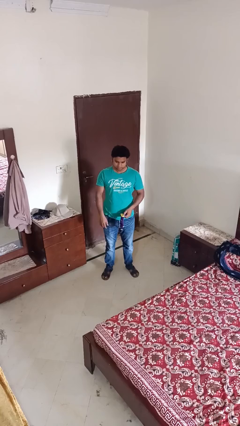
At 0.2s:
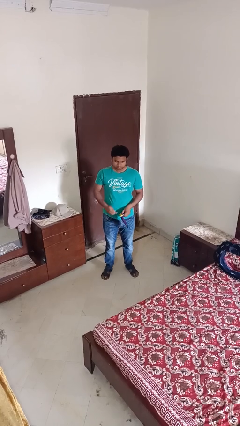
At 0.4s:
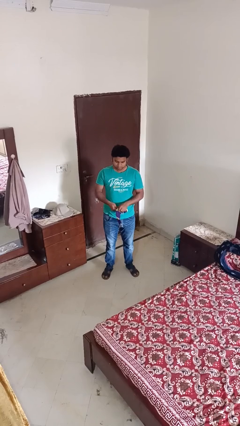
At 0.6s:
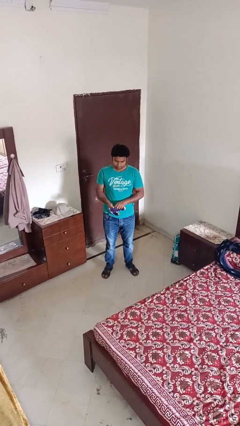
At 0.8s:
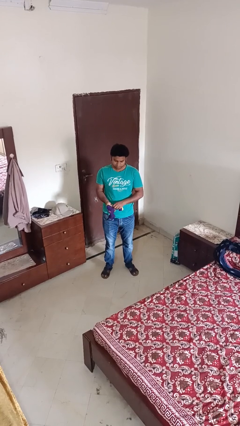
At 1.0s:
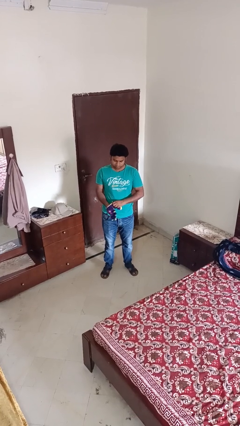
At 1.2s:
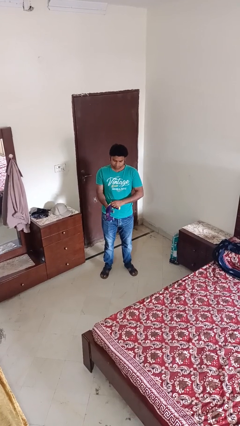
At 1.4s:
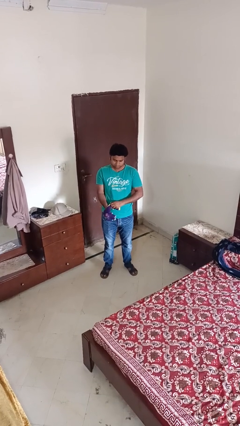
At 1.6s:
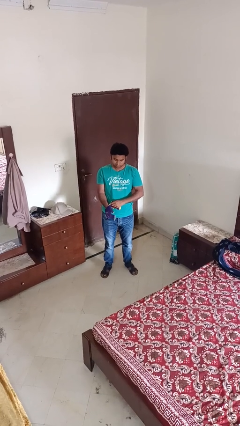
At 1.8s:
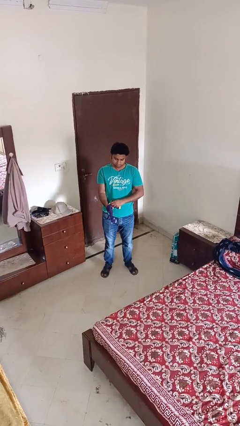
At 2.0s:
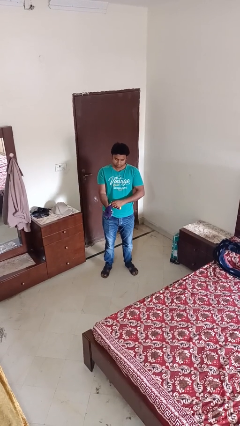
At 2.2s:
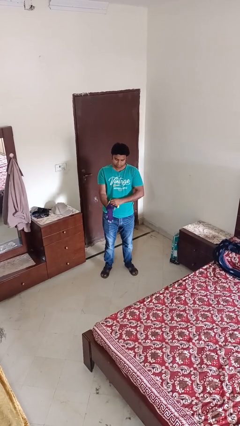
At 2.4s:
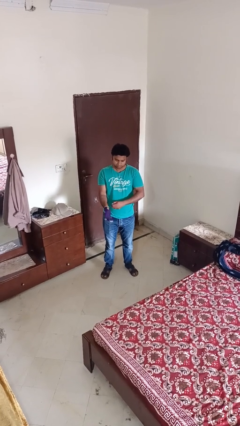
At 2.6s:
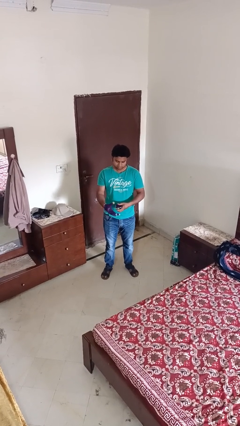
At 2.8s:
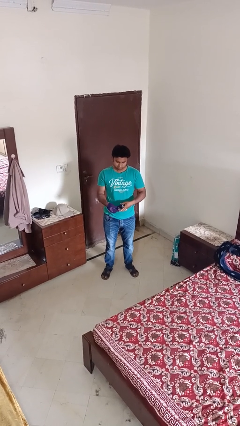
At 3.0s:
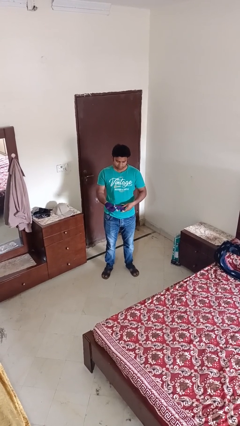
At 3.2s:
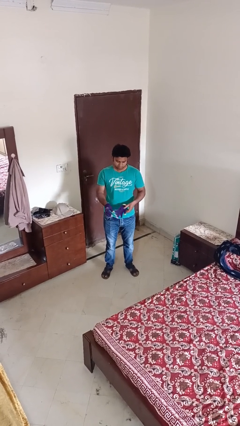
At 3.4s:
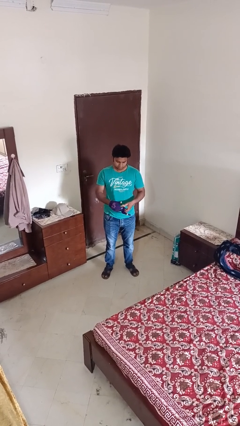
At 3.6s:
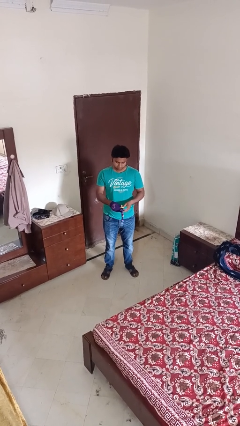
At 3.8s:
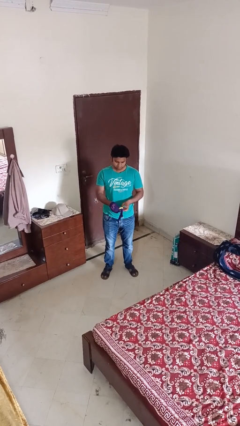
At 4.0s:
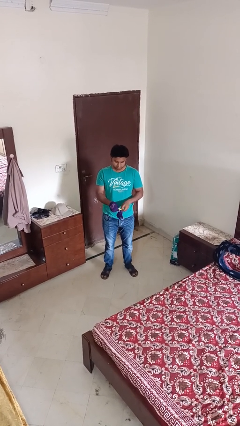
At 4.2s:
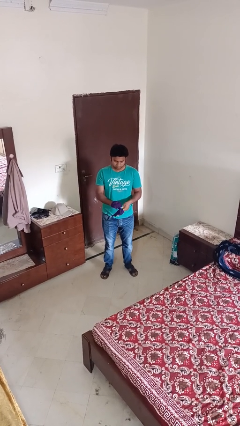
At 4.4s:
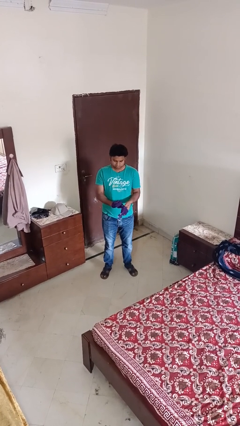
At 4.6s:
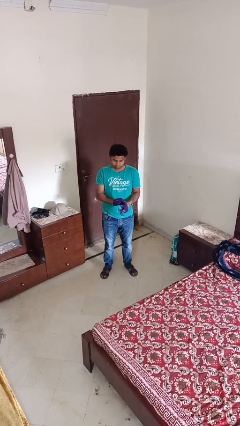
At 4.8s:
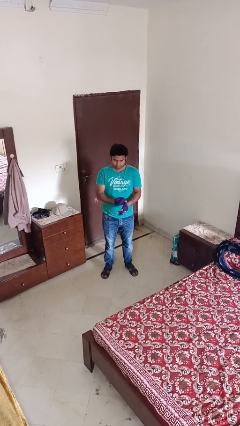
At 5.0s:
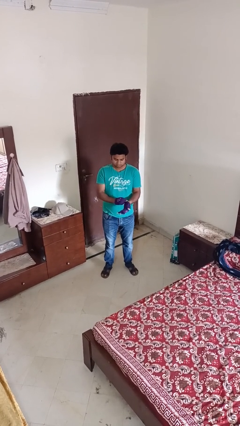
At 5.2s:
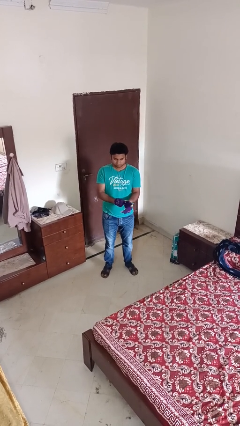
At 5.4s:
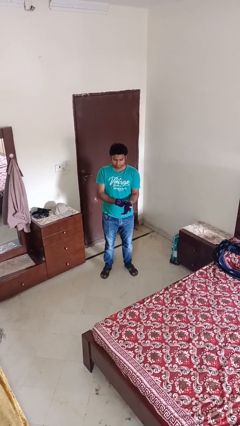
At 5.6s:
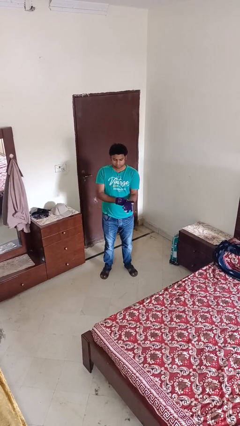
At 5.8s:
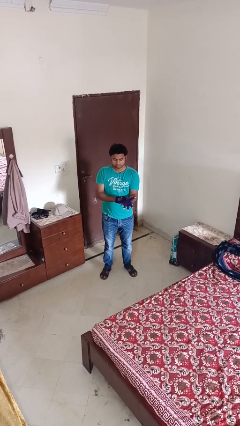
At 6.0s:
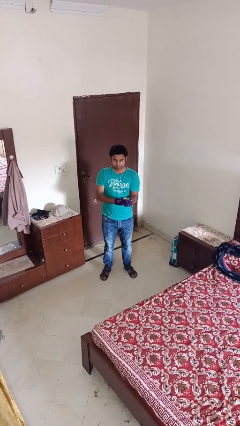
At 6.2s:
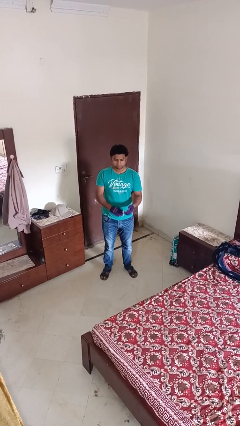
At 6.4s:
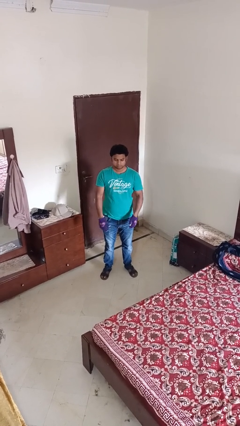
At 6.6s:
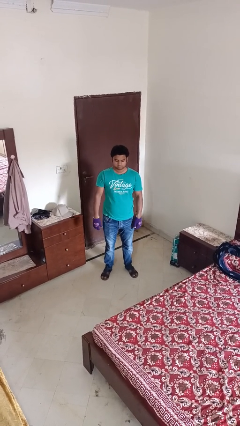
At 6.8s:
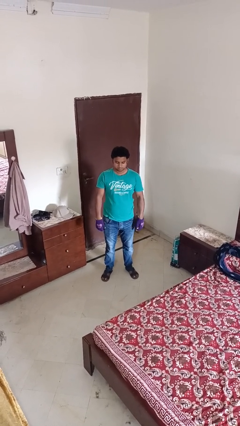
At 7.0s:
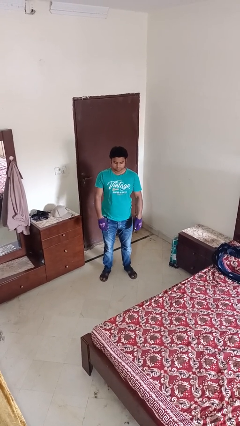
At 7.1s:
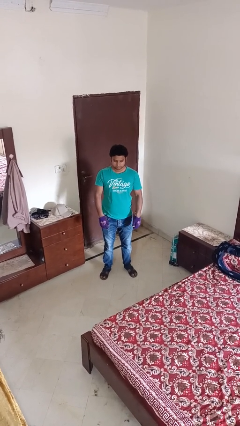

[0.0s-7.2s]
person puts on gloves

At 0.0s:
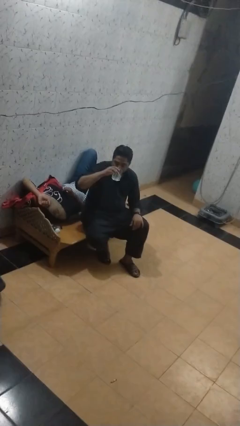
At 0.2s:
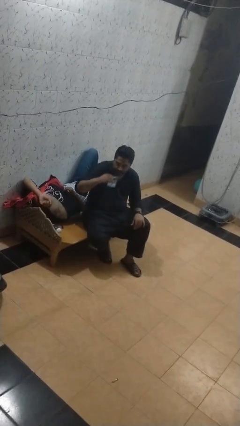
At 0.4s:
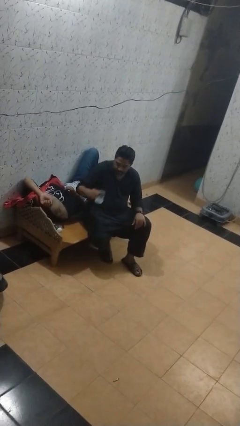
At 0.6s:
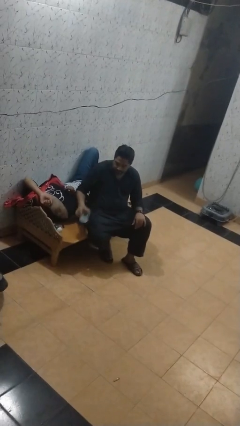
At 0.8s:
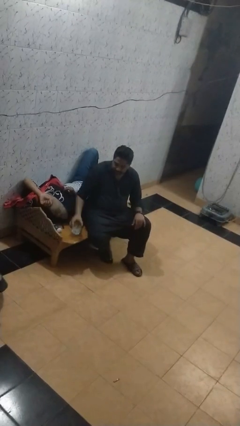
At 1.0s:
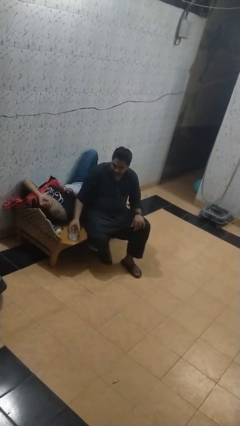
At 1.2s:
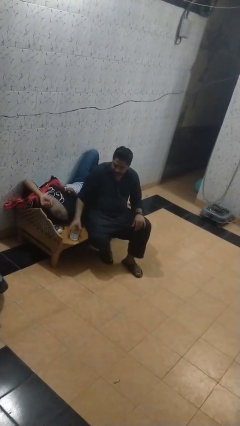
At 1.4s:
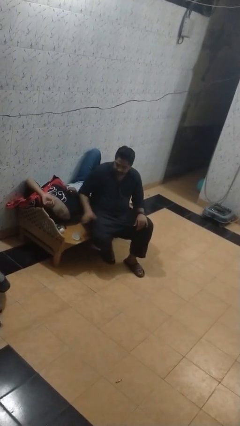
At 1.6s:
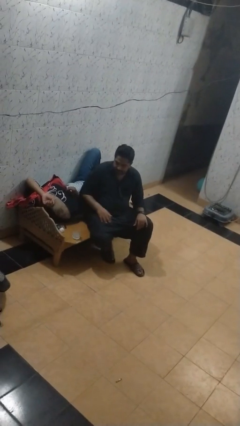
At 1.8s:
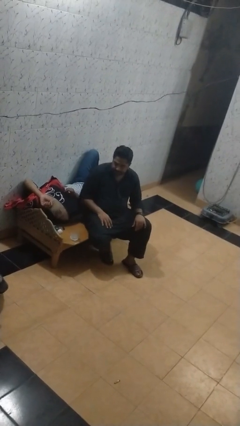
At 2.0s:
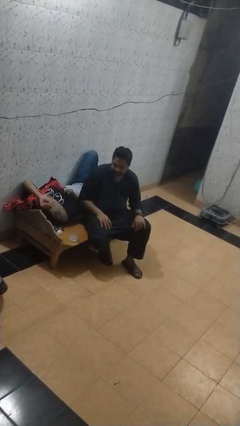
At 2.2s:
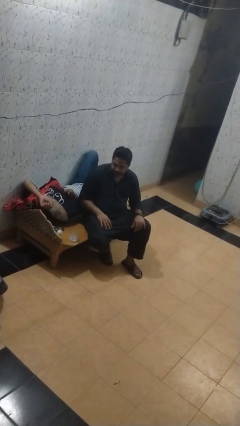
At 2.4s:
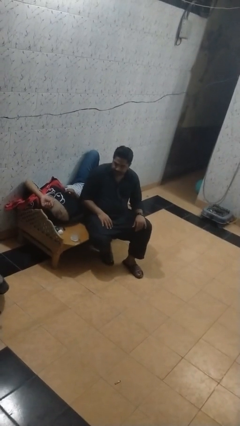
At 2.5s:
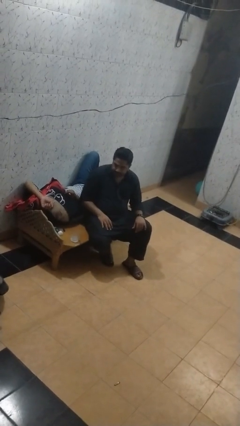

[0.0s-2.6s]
person puts down object on table

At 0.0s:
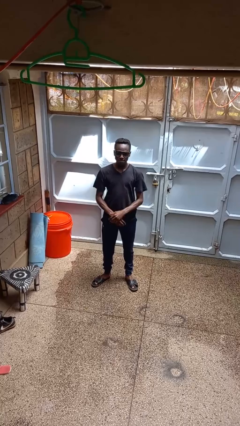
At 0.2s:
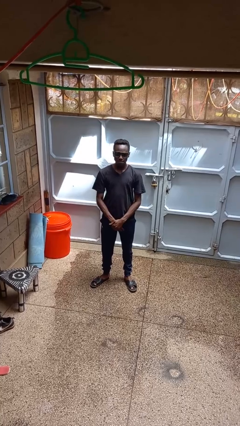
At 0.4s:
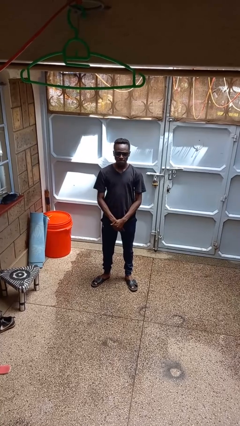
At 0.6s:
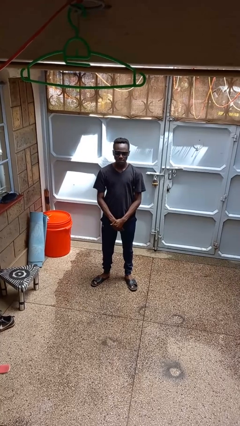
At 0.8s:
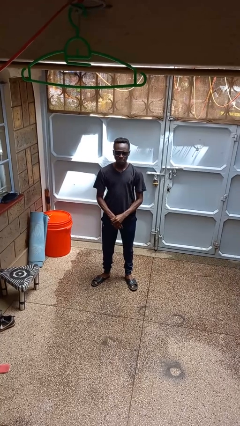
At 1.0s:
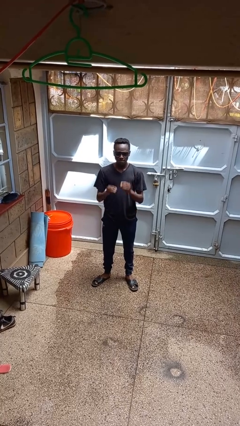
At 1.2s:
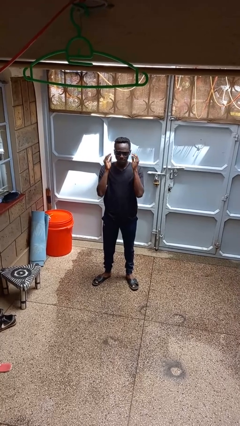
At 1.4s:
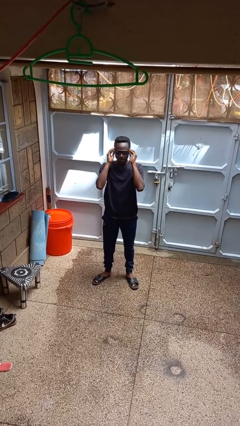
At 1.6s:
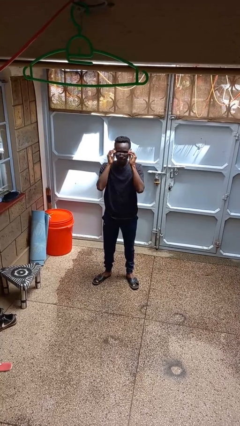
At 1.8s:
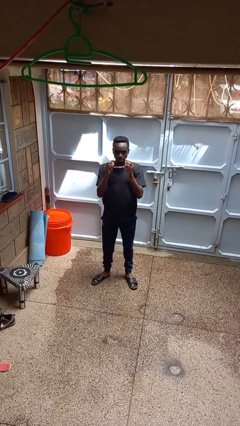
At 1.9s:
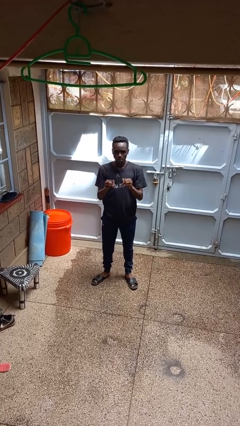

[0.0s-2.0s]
person takes off sunglasses

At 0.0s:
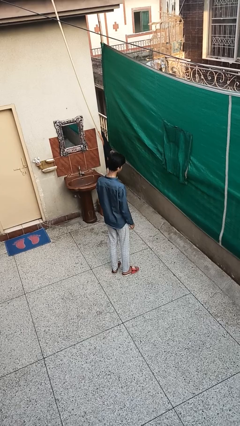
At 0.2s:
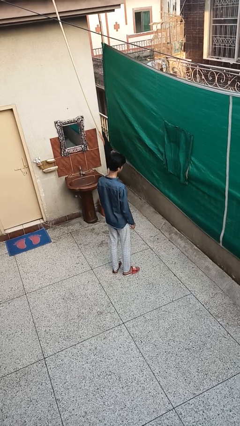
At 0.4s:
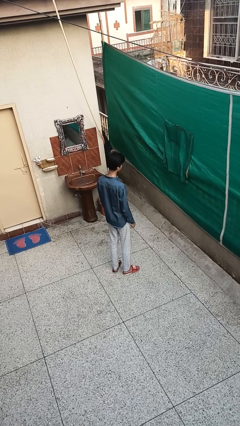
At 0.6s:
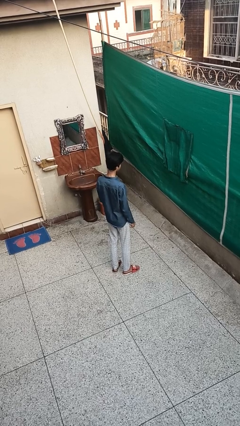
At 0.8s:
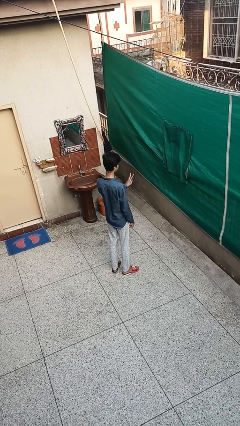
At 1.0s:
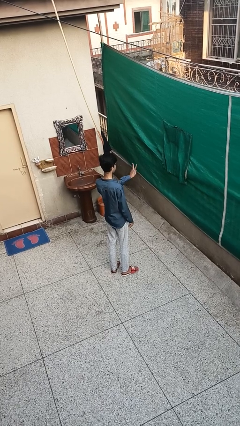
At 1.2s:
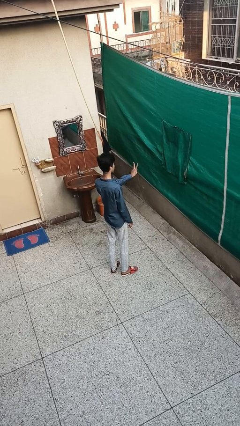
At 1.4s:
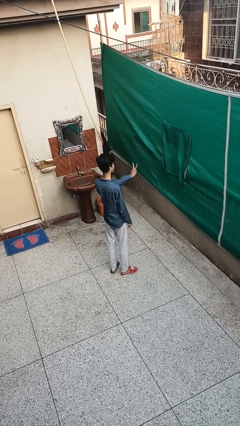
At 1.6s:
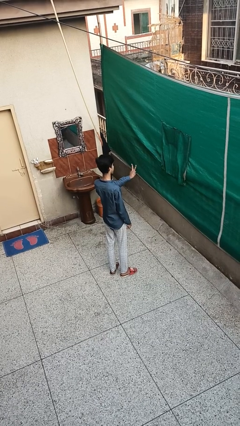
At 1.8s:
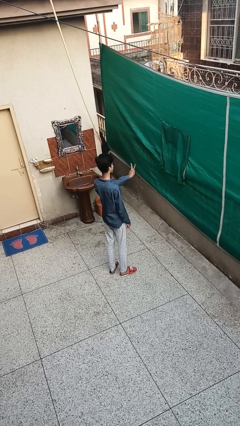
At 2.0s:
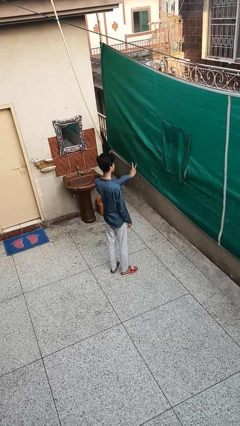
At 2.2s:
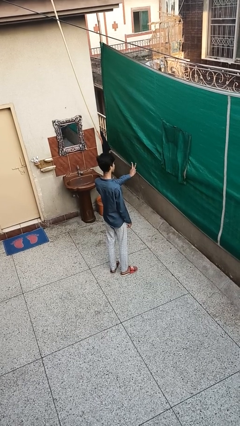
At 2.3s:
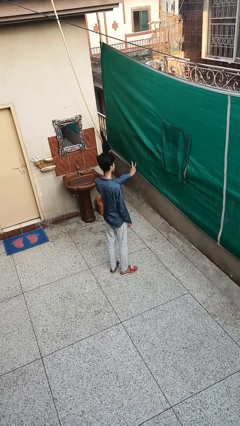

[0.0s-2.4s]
person gestures peace

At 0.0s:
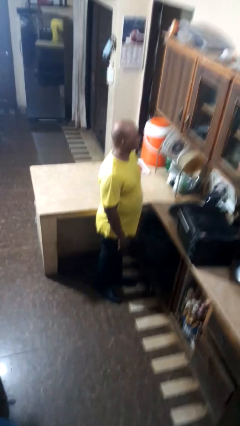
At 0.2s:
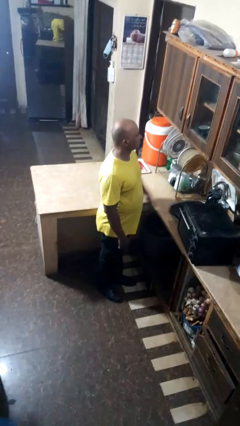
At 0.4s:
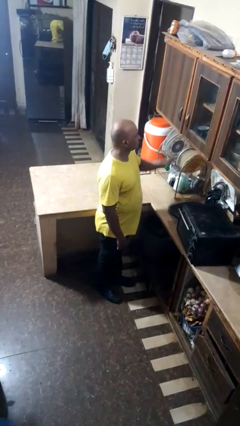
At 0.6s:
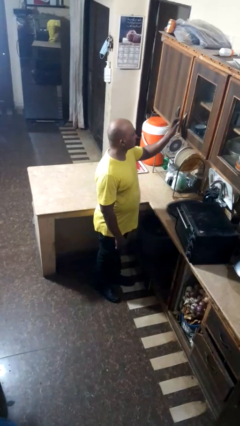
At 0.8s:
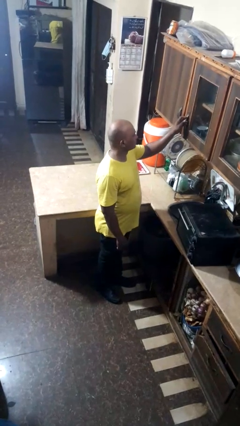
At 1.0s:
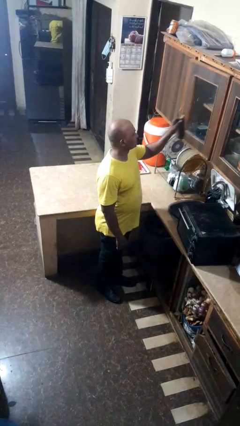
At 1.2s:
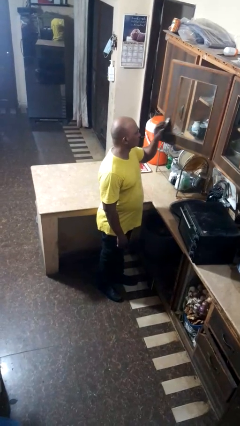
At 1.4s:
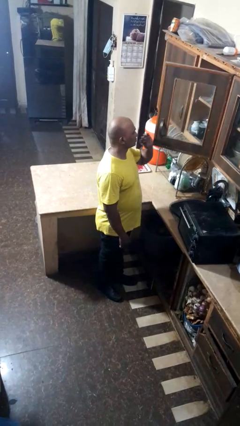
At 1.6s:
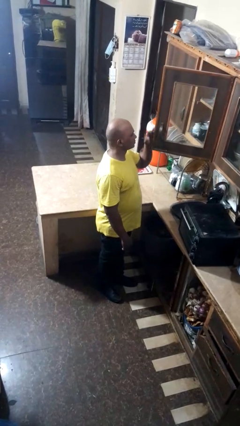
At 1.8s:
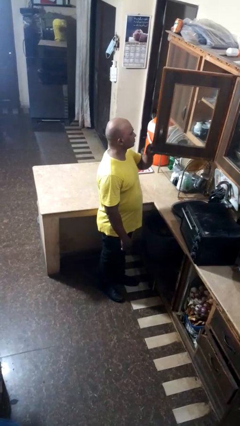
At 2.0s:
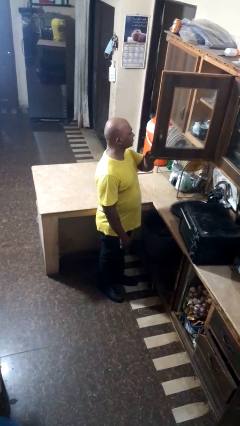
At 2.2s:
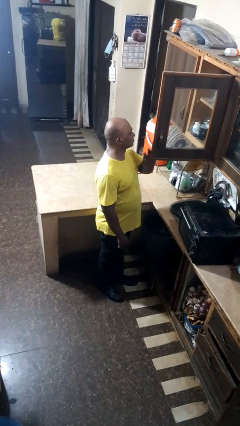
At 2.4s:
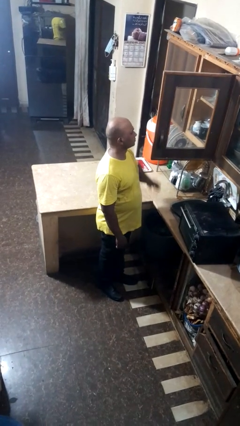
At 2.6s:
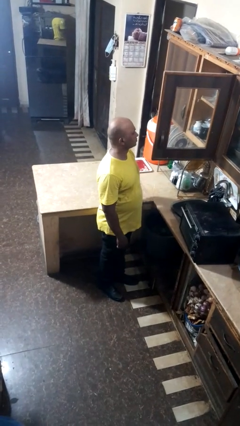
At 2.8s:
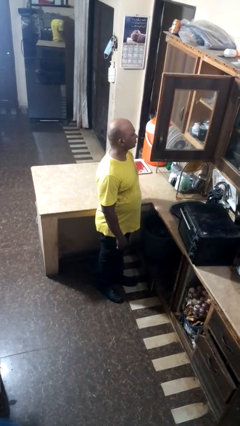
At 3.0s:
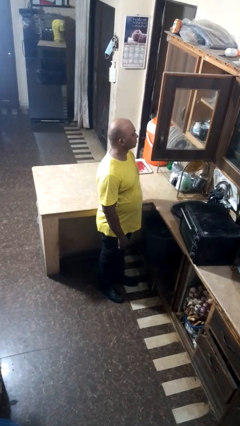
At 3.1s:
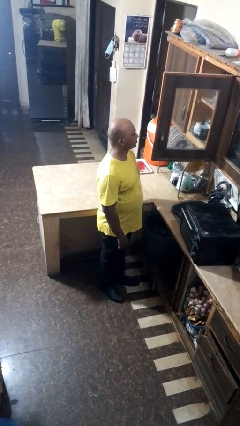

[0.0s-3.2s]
person opens cabinet

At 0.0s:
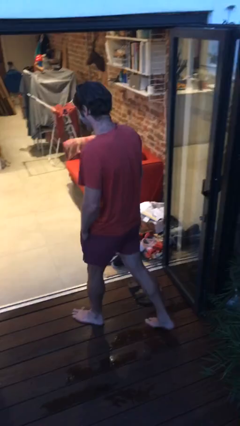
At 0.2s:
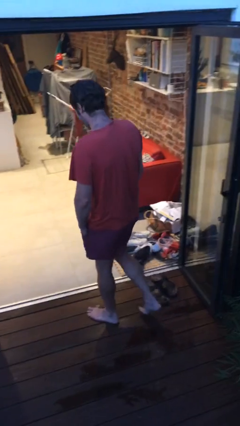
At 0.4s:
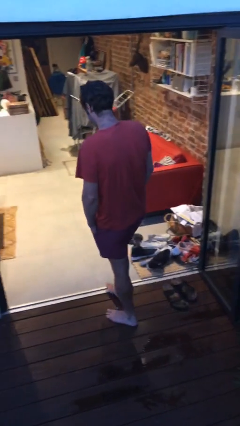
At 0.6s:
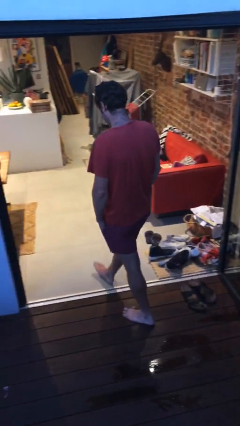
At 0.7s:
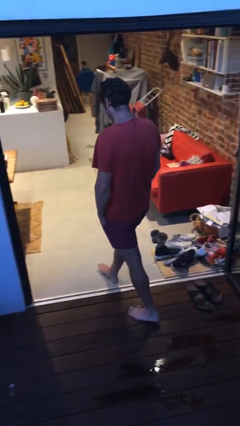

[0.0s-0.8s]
person exits scene through structure
